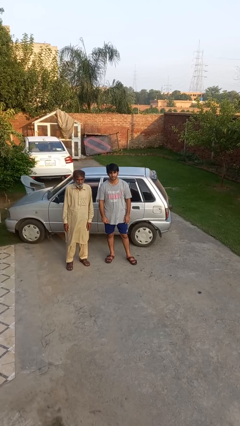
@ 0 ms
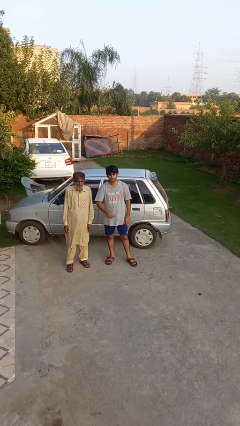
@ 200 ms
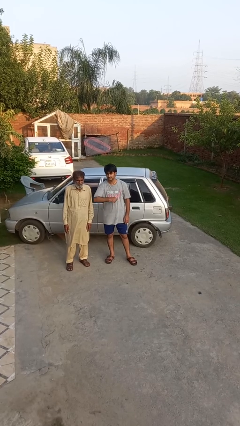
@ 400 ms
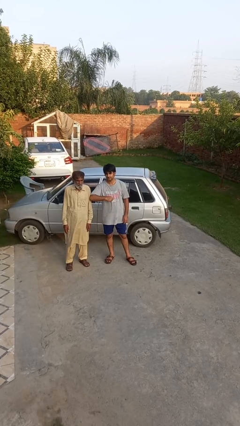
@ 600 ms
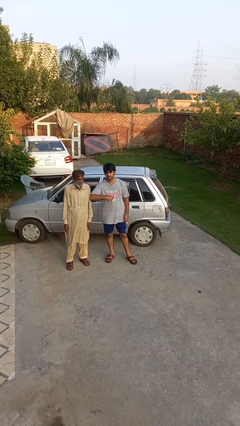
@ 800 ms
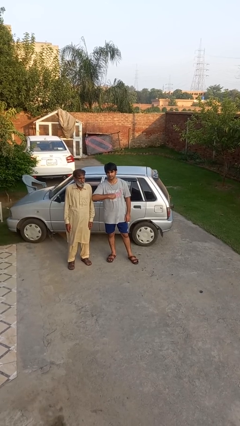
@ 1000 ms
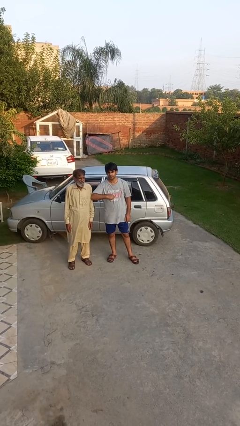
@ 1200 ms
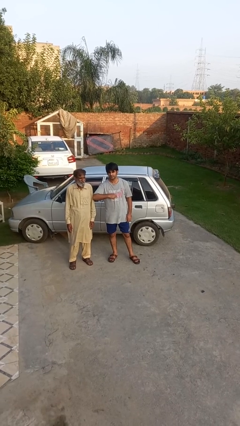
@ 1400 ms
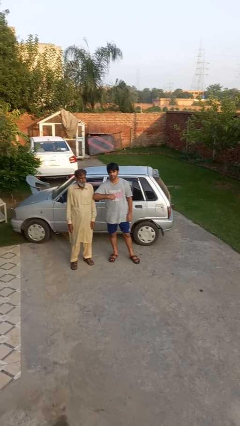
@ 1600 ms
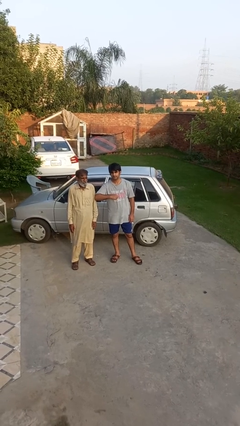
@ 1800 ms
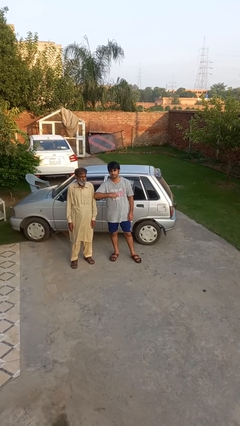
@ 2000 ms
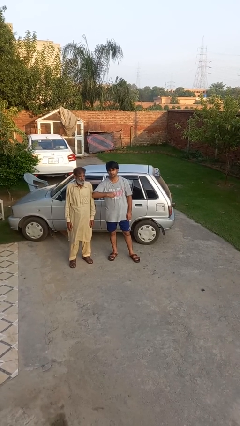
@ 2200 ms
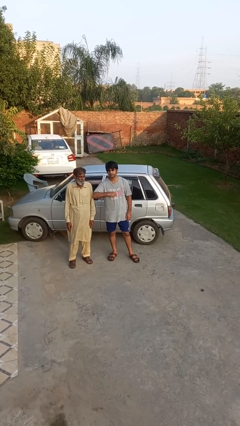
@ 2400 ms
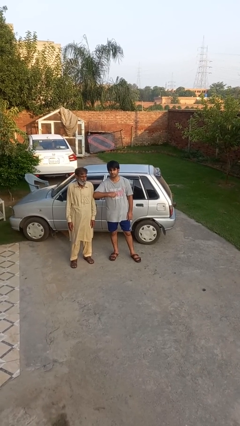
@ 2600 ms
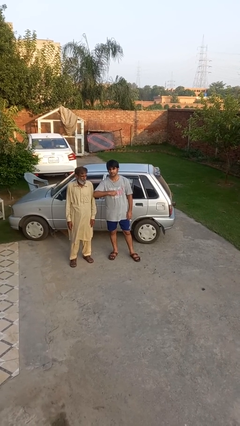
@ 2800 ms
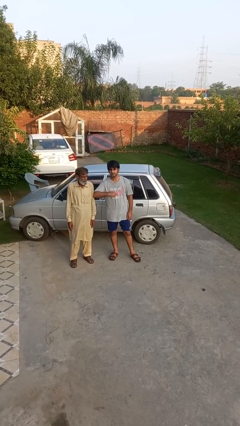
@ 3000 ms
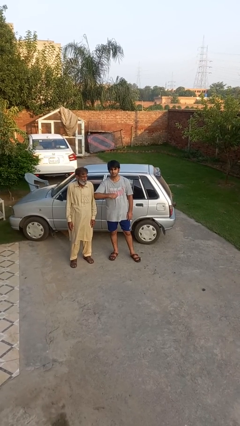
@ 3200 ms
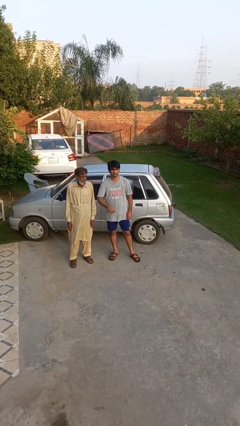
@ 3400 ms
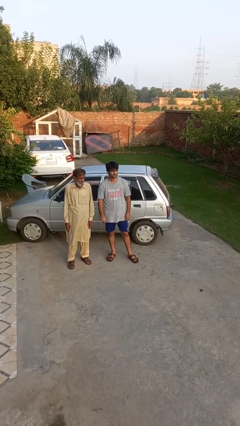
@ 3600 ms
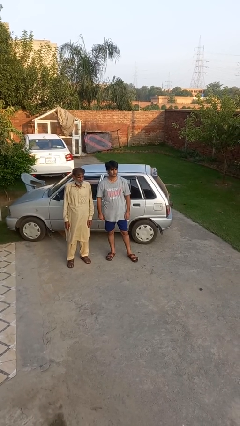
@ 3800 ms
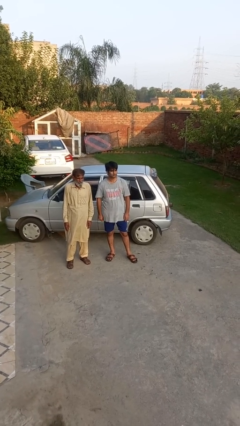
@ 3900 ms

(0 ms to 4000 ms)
person nudges person with elbow

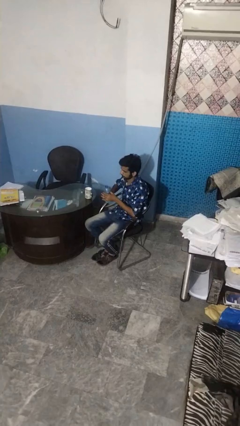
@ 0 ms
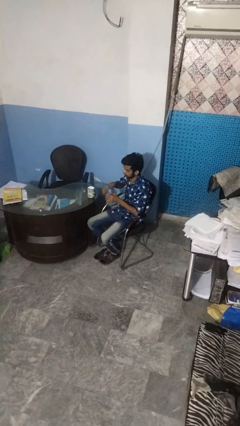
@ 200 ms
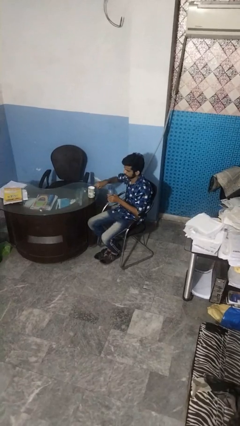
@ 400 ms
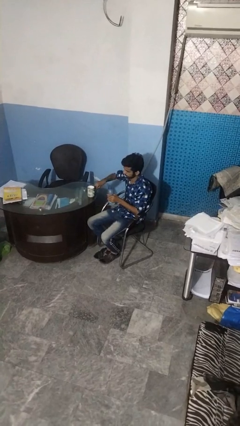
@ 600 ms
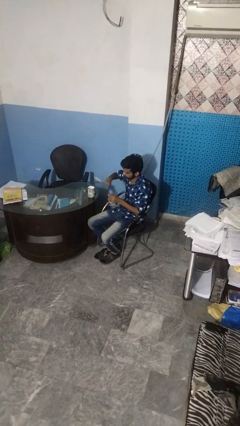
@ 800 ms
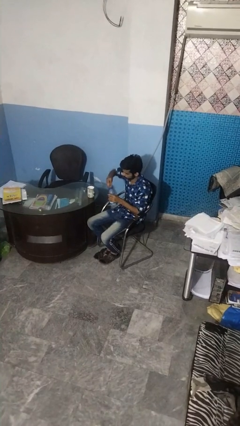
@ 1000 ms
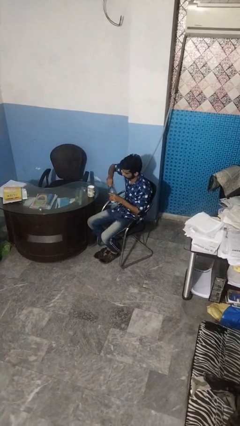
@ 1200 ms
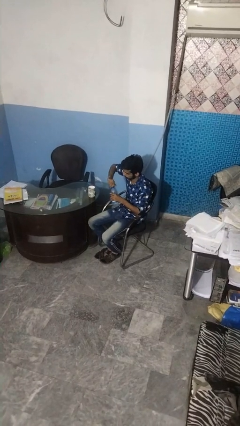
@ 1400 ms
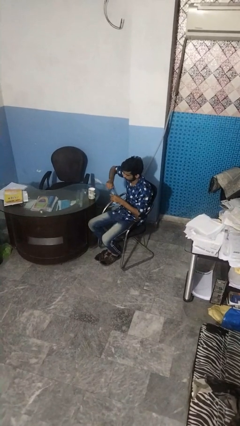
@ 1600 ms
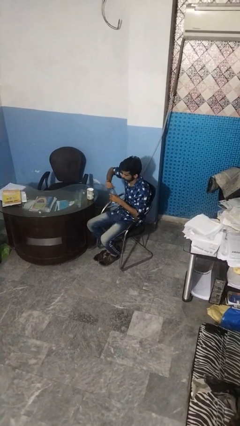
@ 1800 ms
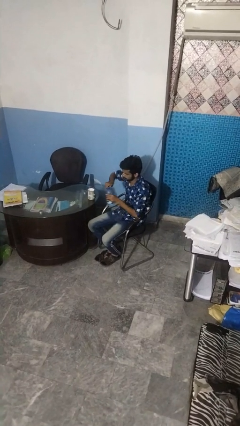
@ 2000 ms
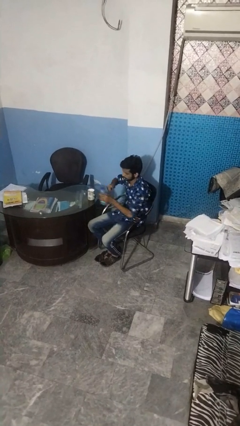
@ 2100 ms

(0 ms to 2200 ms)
person screws lid to bottle

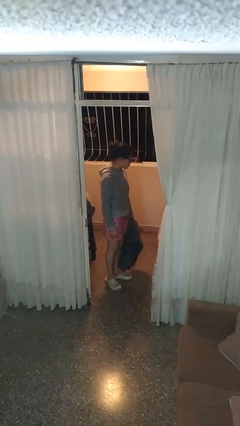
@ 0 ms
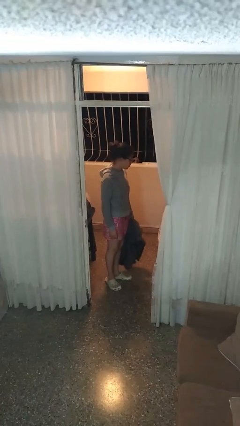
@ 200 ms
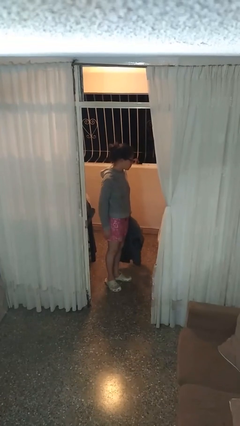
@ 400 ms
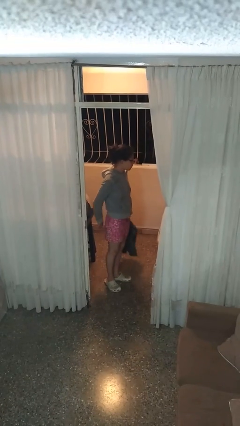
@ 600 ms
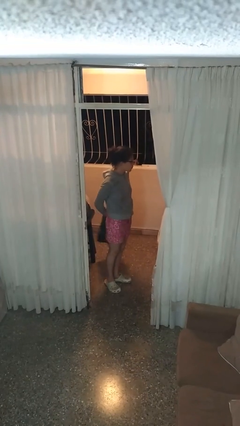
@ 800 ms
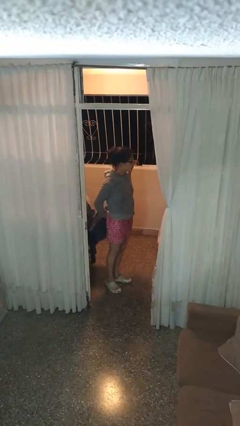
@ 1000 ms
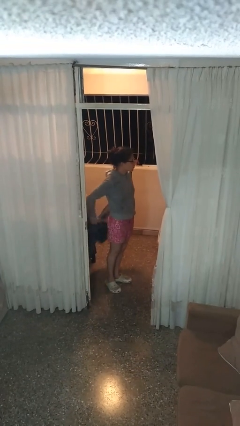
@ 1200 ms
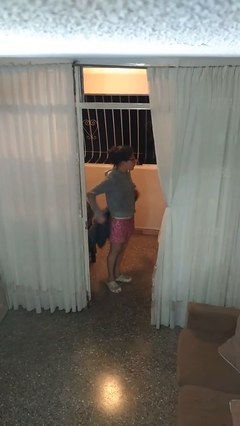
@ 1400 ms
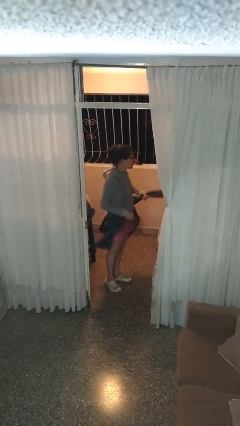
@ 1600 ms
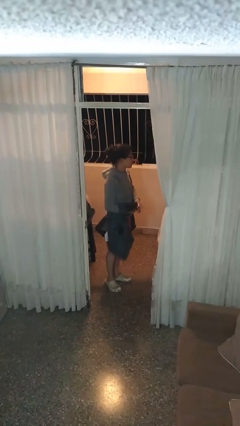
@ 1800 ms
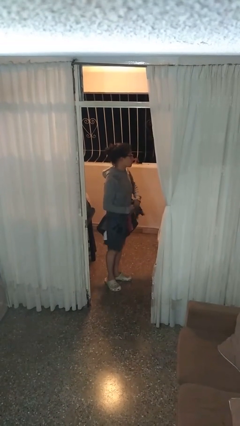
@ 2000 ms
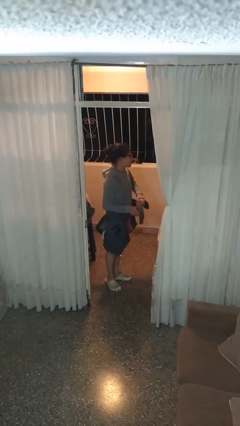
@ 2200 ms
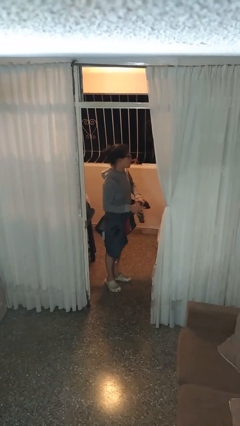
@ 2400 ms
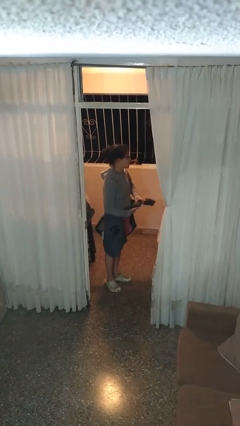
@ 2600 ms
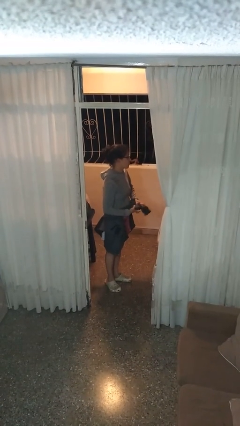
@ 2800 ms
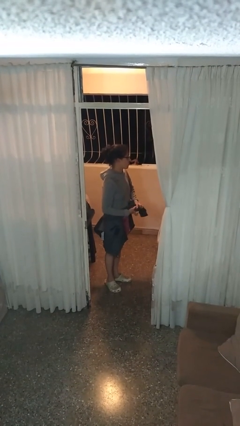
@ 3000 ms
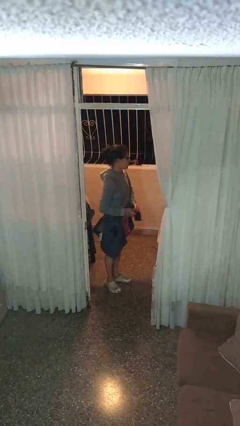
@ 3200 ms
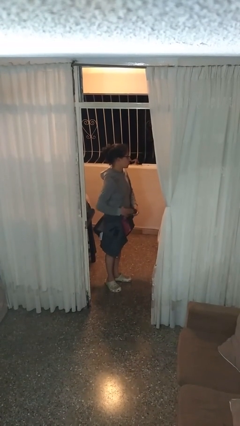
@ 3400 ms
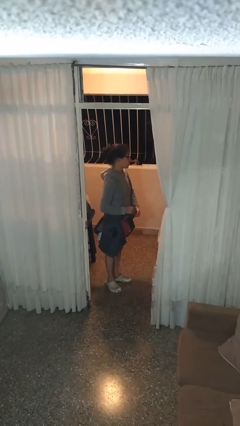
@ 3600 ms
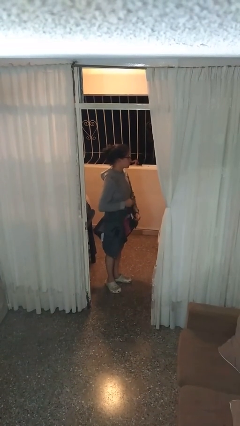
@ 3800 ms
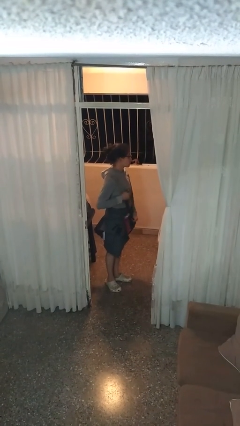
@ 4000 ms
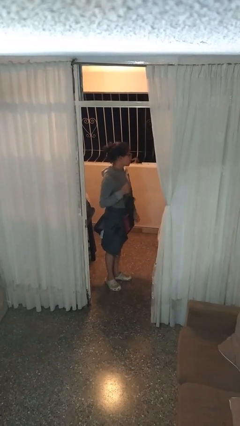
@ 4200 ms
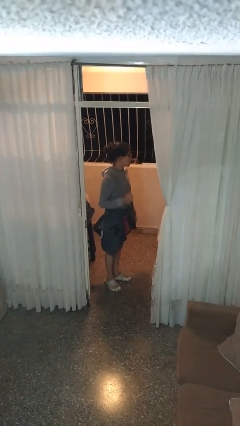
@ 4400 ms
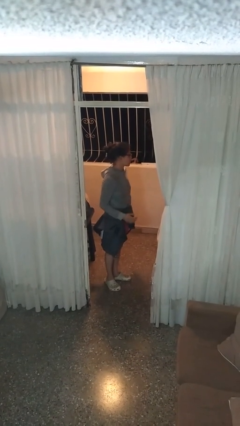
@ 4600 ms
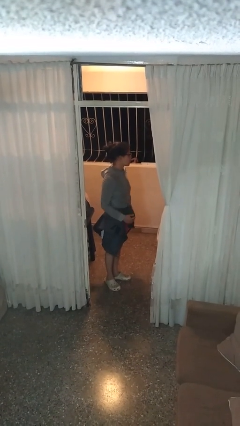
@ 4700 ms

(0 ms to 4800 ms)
person ties jacket around waist

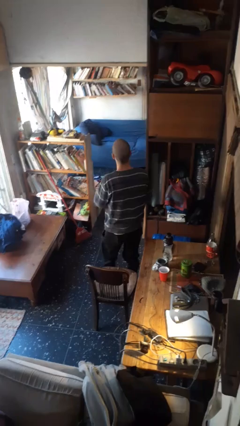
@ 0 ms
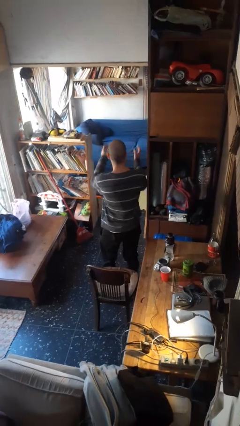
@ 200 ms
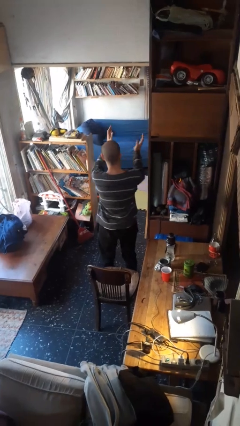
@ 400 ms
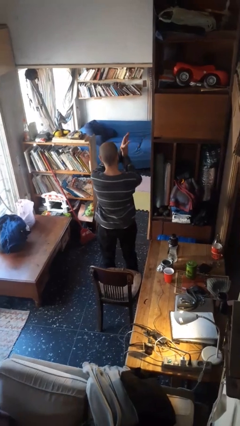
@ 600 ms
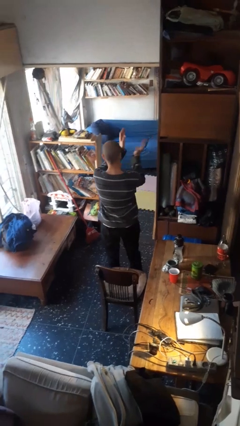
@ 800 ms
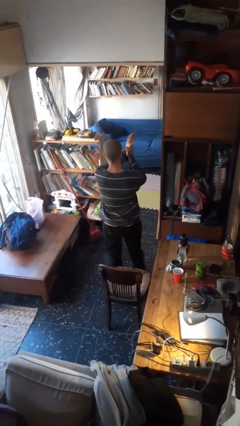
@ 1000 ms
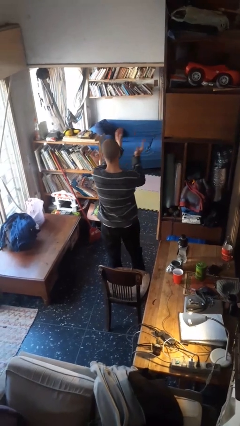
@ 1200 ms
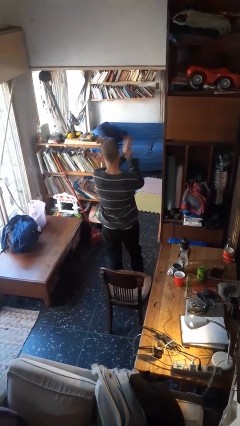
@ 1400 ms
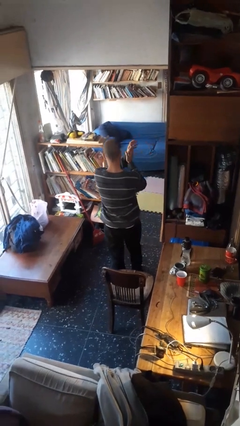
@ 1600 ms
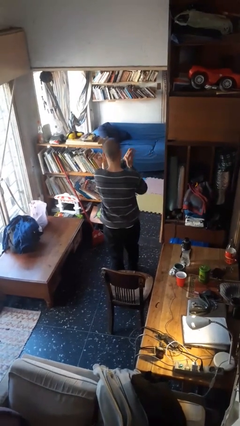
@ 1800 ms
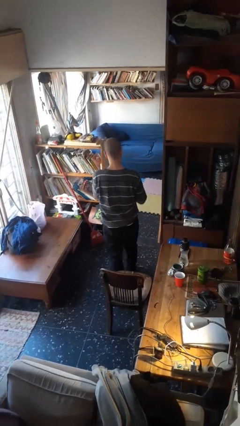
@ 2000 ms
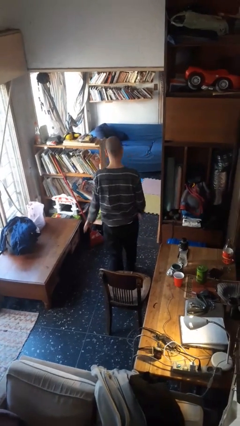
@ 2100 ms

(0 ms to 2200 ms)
person claps hands

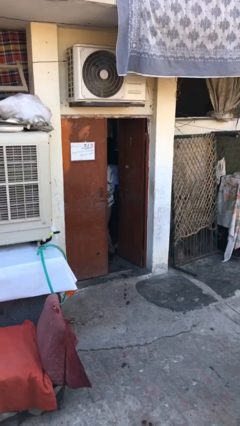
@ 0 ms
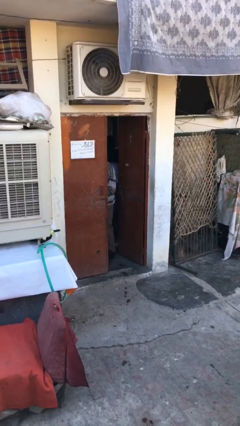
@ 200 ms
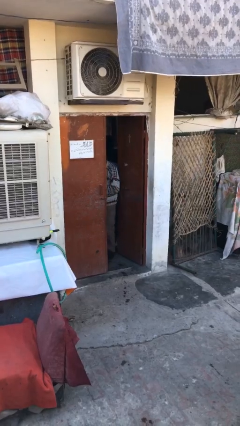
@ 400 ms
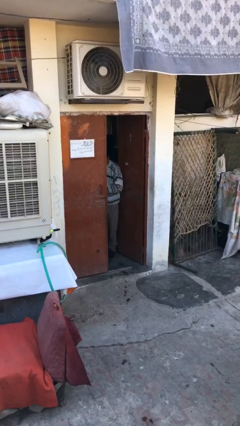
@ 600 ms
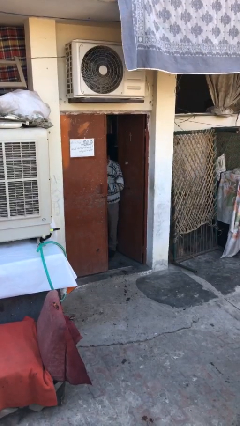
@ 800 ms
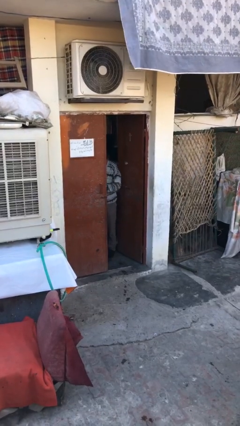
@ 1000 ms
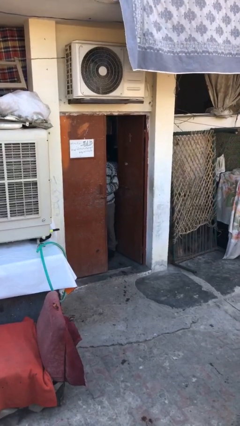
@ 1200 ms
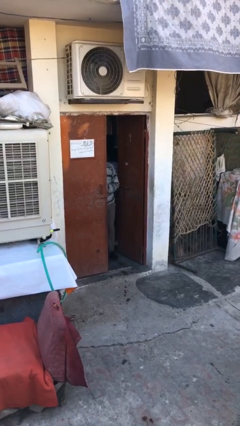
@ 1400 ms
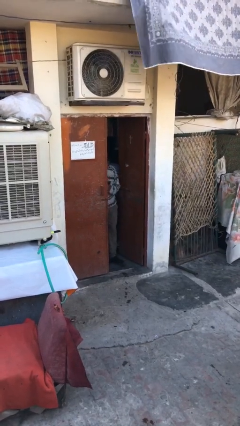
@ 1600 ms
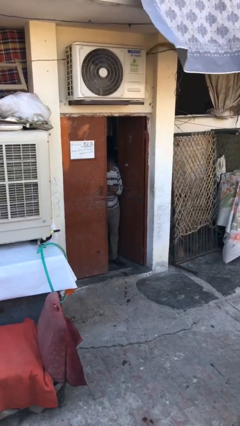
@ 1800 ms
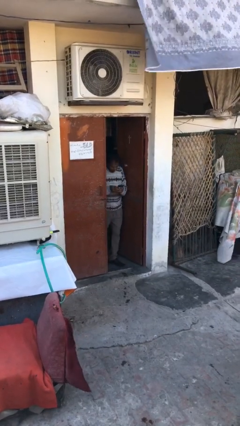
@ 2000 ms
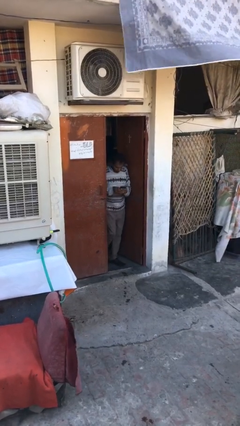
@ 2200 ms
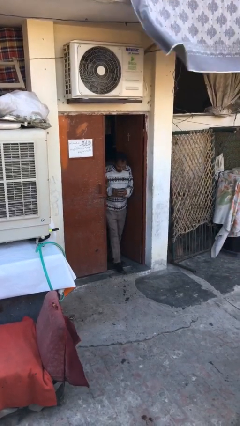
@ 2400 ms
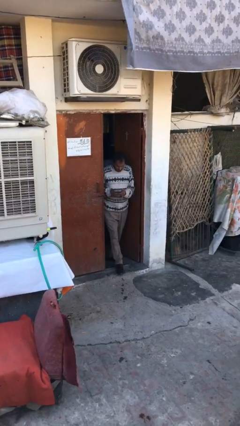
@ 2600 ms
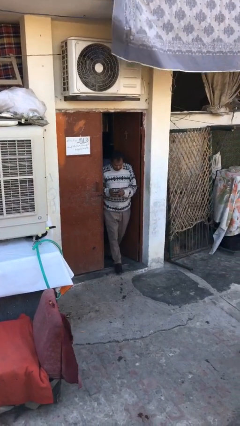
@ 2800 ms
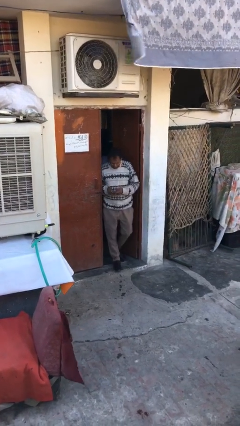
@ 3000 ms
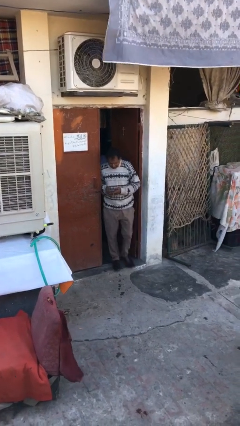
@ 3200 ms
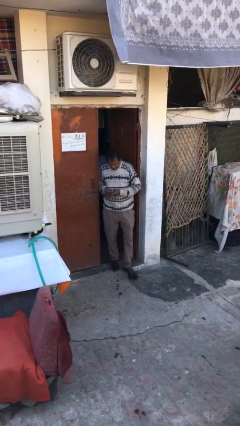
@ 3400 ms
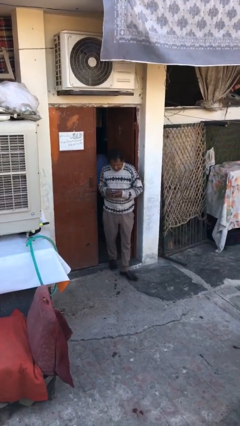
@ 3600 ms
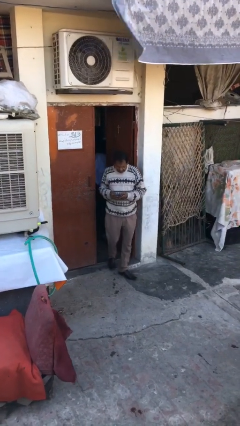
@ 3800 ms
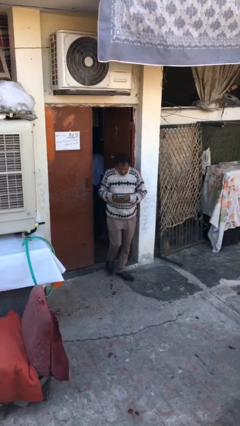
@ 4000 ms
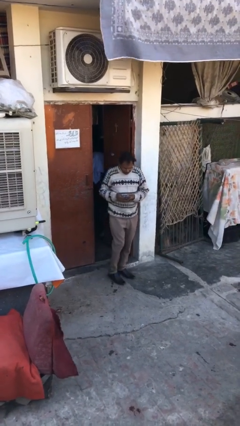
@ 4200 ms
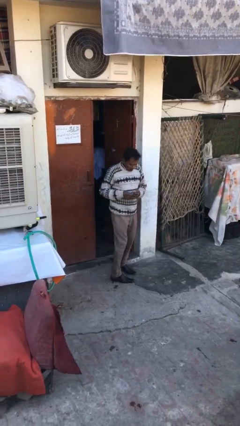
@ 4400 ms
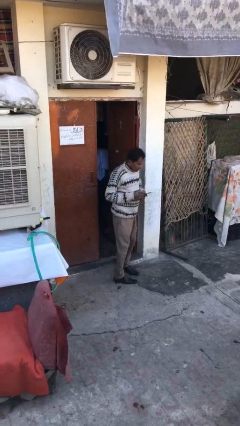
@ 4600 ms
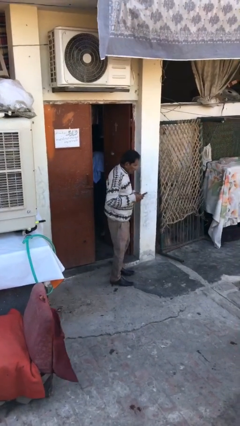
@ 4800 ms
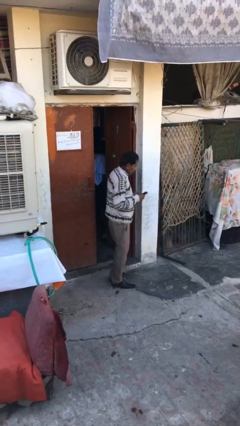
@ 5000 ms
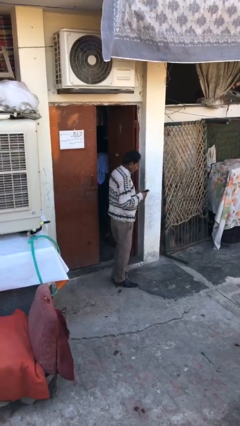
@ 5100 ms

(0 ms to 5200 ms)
person enters scene through structure
